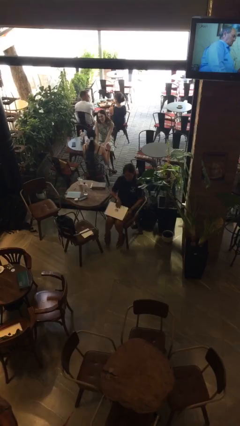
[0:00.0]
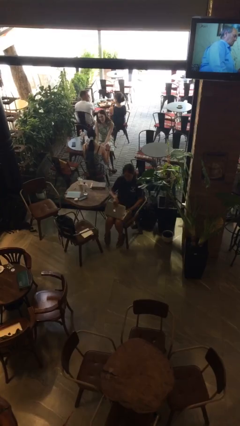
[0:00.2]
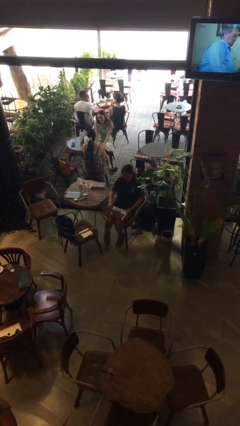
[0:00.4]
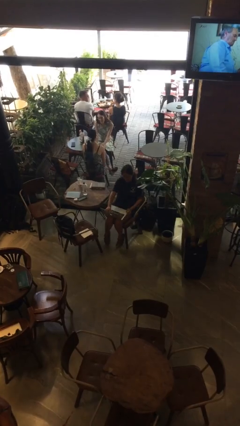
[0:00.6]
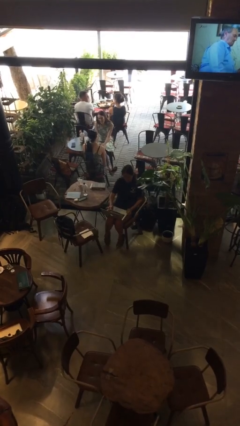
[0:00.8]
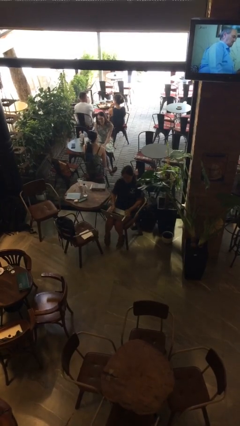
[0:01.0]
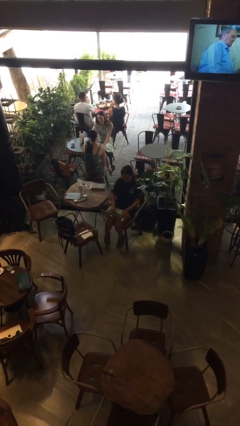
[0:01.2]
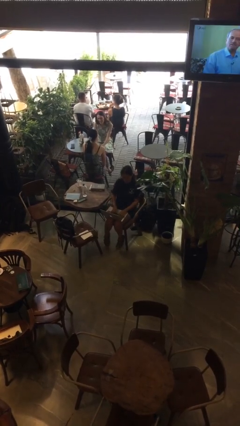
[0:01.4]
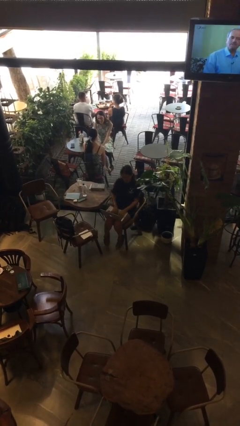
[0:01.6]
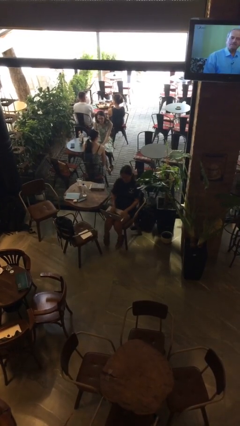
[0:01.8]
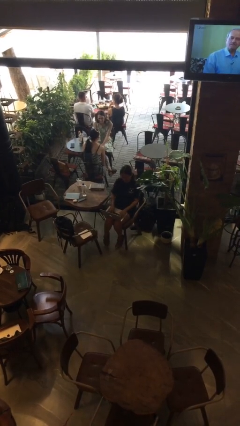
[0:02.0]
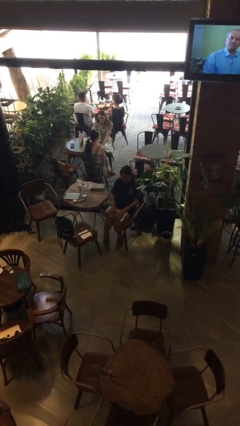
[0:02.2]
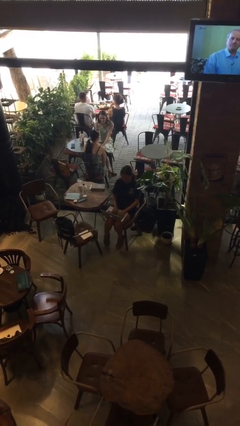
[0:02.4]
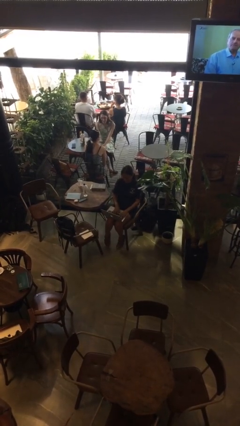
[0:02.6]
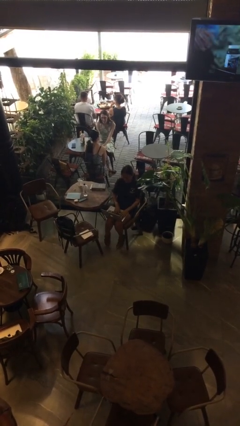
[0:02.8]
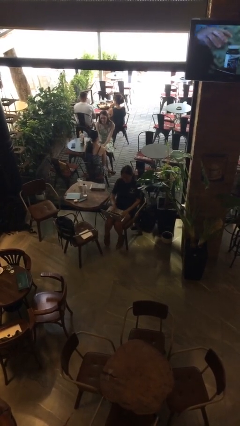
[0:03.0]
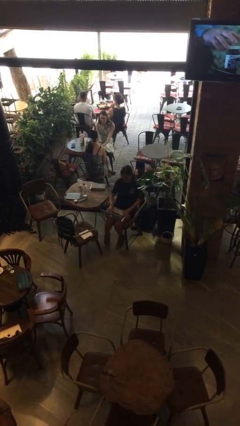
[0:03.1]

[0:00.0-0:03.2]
person opens laptop

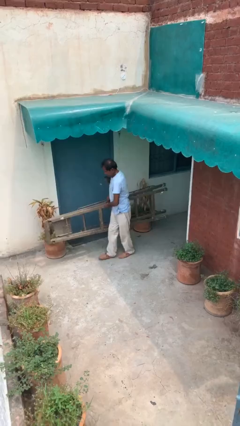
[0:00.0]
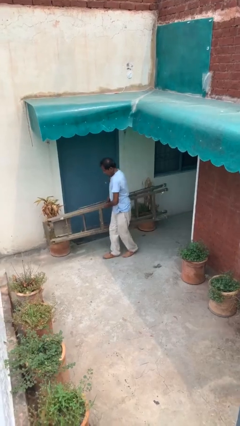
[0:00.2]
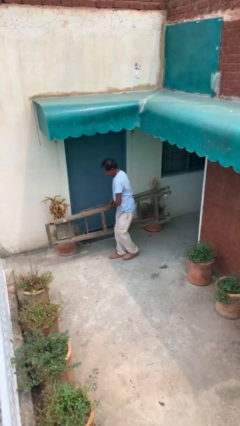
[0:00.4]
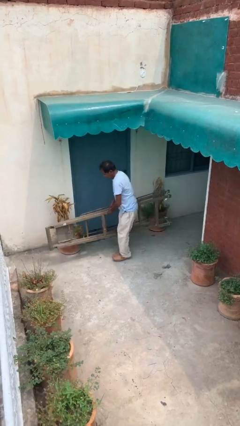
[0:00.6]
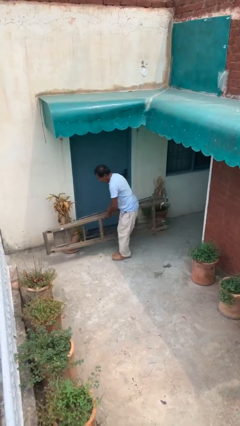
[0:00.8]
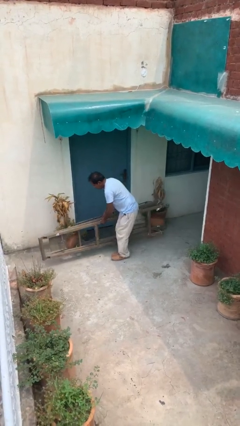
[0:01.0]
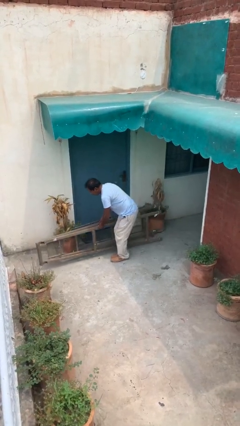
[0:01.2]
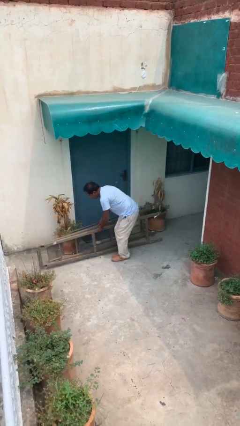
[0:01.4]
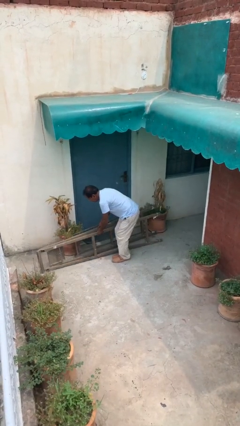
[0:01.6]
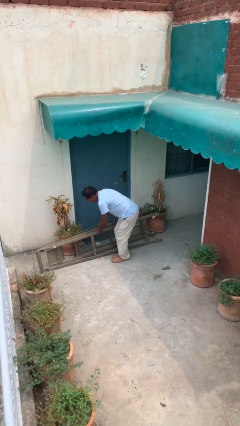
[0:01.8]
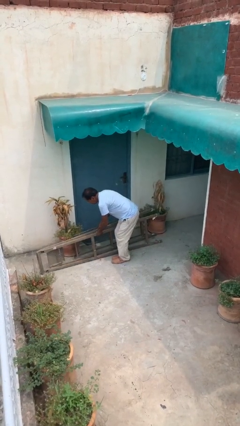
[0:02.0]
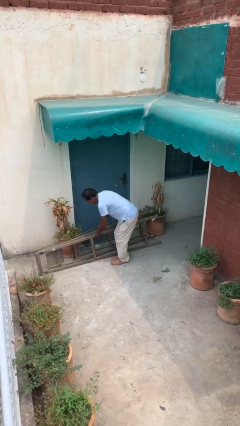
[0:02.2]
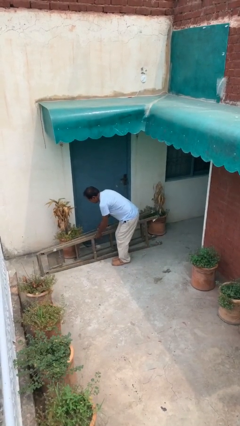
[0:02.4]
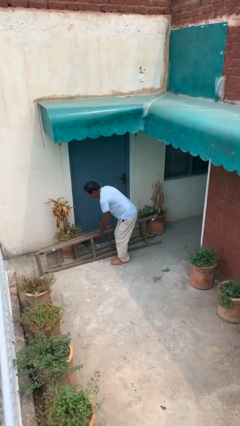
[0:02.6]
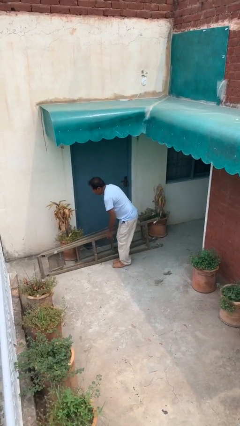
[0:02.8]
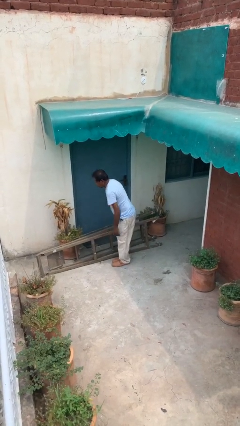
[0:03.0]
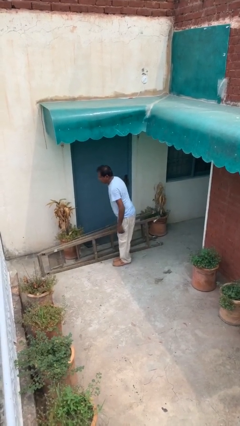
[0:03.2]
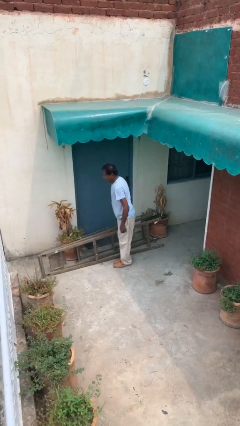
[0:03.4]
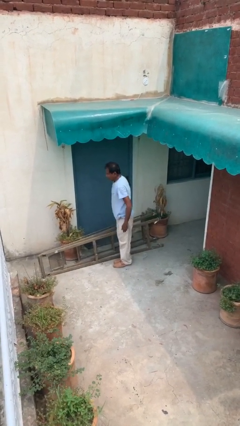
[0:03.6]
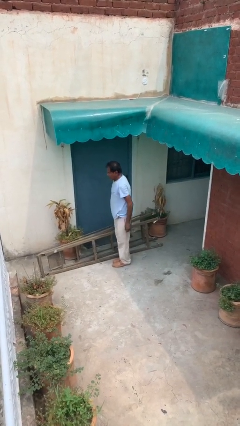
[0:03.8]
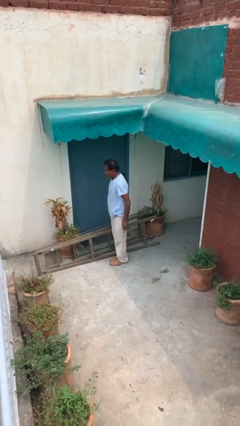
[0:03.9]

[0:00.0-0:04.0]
person puts down object on floor

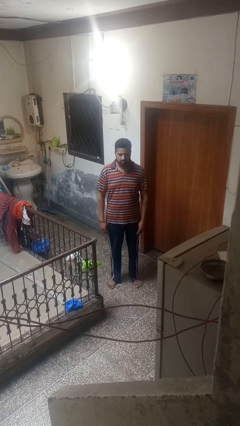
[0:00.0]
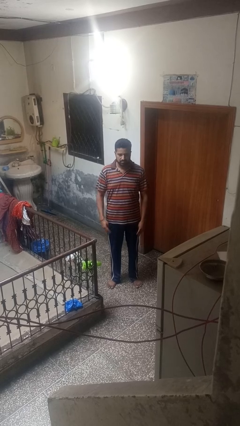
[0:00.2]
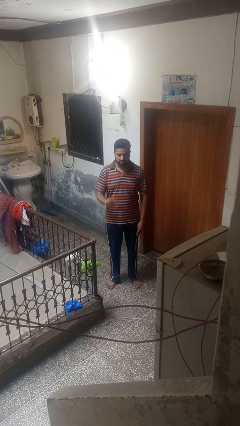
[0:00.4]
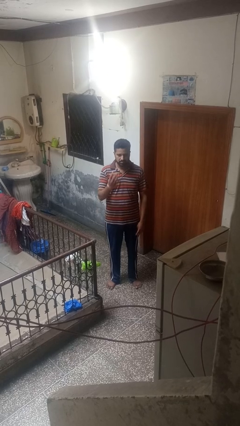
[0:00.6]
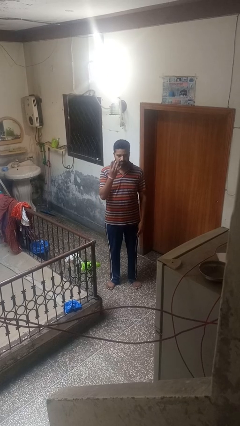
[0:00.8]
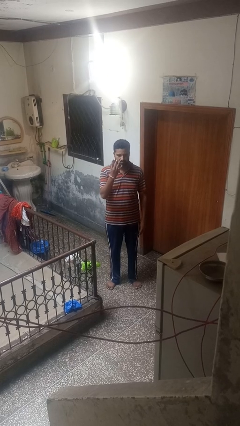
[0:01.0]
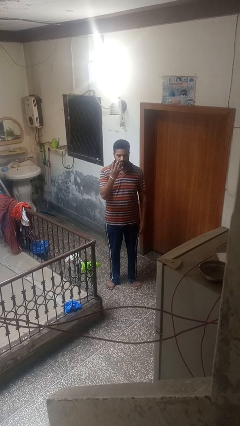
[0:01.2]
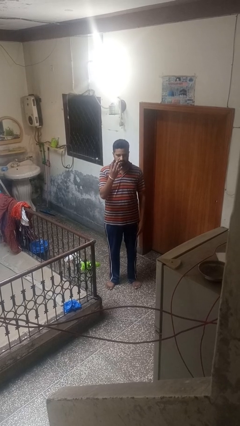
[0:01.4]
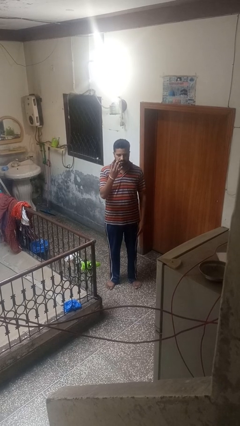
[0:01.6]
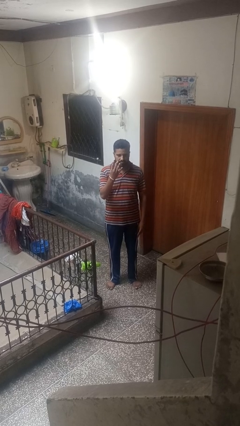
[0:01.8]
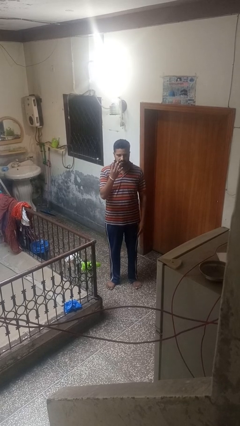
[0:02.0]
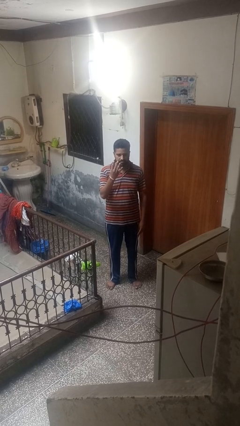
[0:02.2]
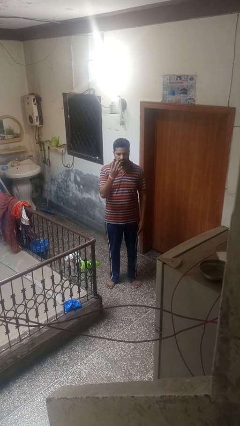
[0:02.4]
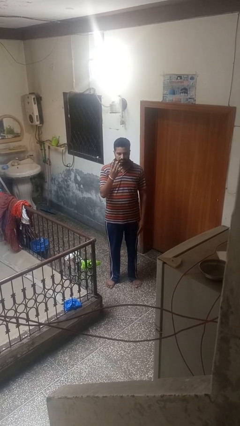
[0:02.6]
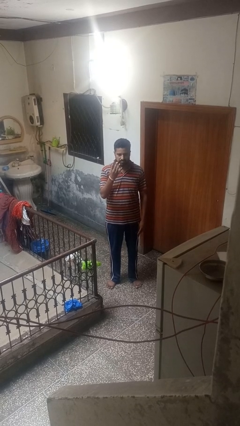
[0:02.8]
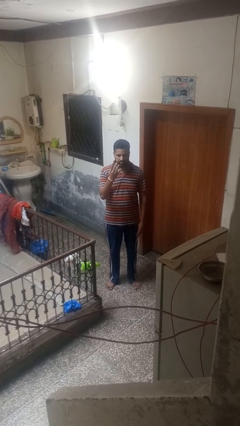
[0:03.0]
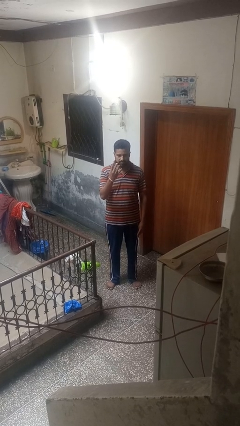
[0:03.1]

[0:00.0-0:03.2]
person gestures number four

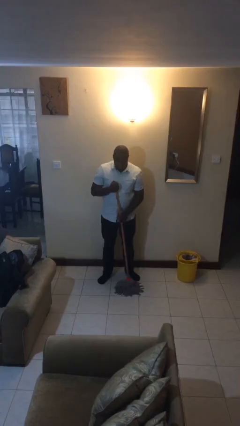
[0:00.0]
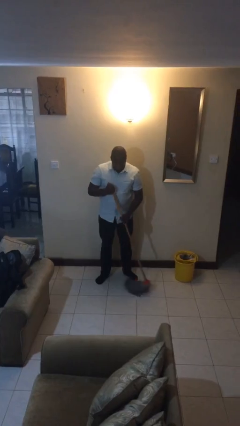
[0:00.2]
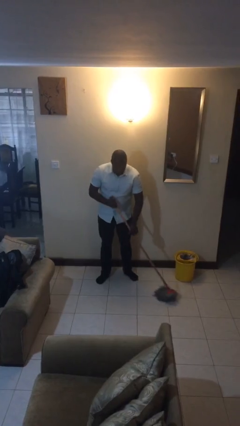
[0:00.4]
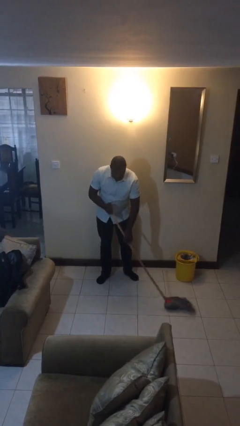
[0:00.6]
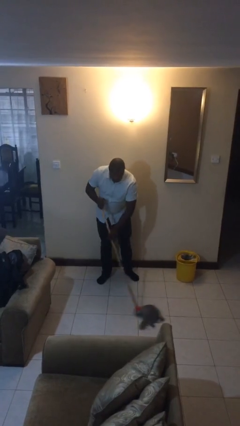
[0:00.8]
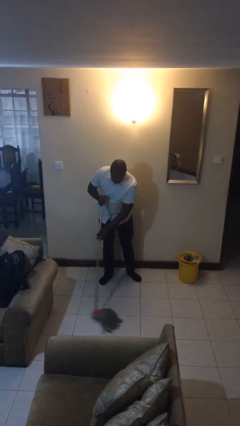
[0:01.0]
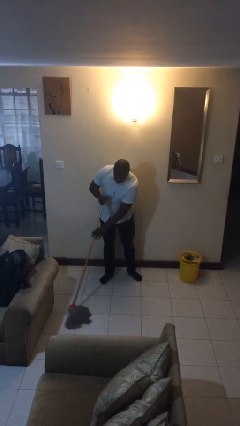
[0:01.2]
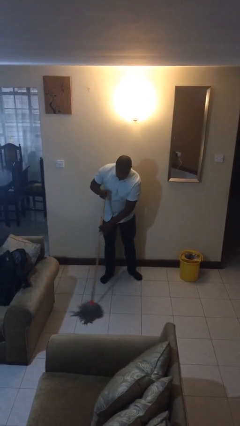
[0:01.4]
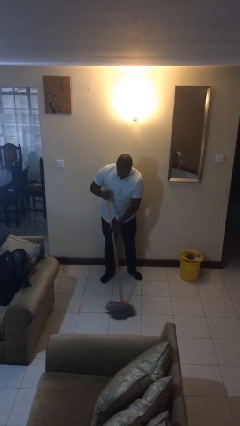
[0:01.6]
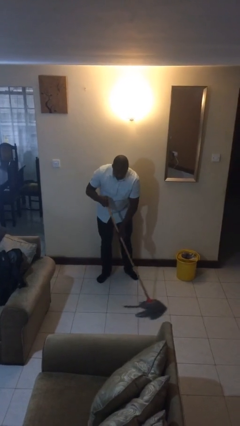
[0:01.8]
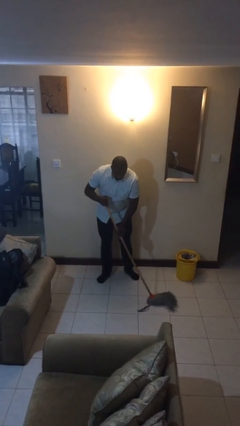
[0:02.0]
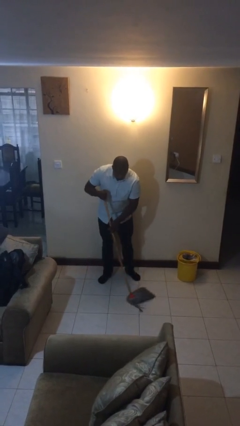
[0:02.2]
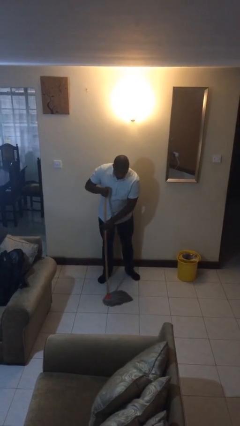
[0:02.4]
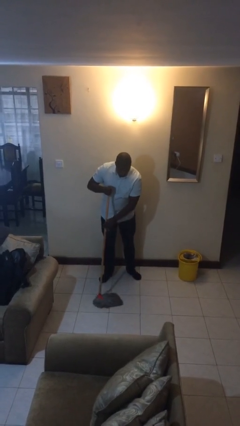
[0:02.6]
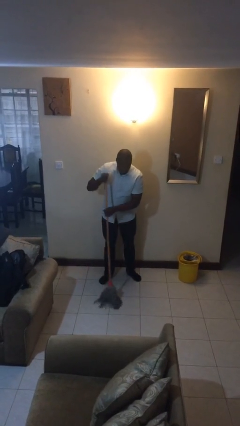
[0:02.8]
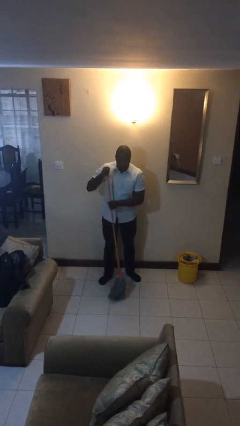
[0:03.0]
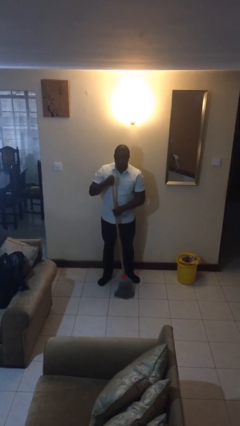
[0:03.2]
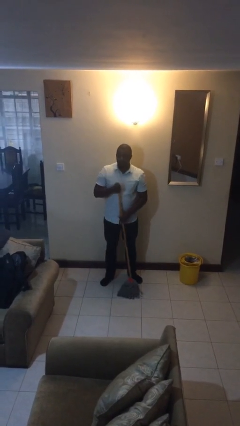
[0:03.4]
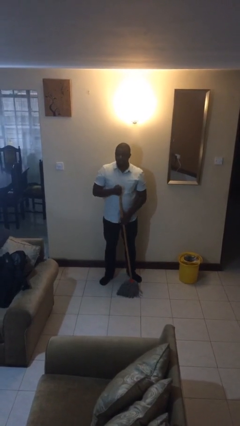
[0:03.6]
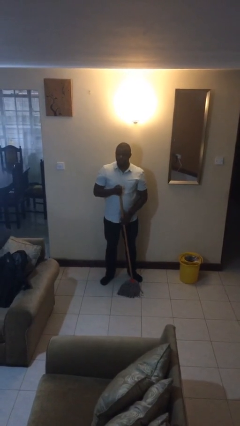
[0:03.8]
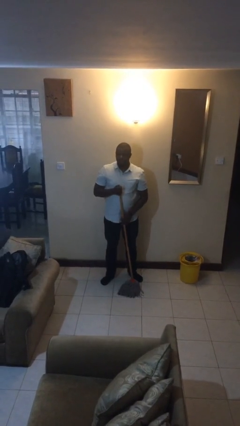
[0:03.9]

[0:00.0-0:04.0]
person mops

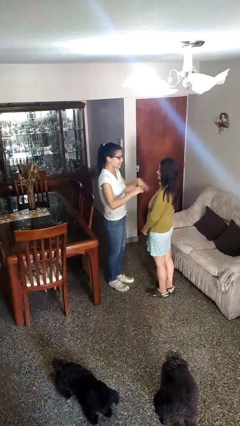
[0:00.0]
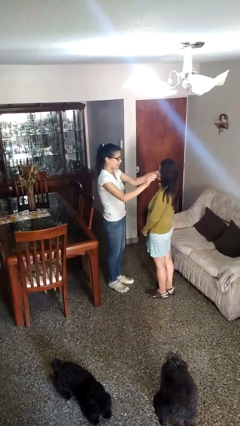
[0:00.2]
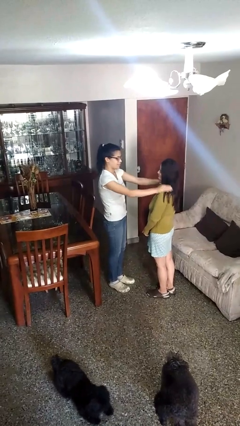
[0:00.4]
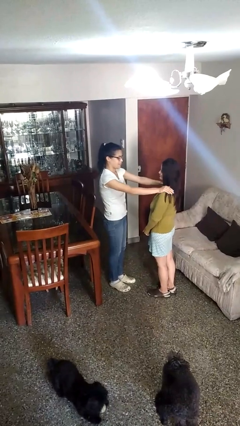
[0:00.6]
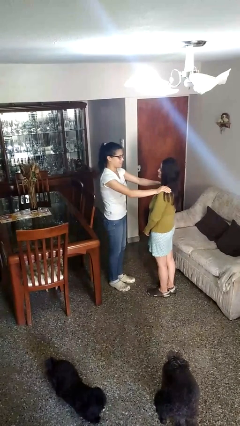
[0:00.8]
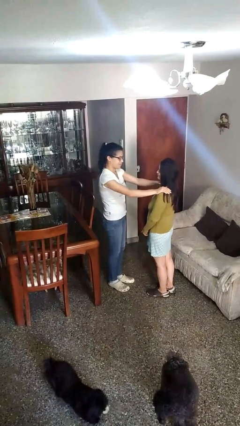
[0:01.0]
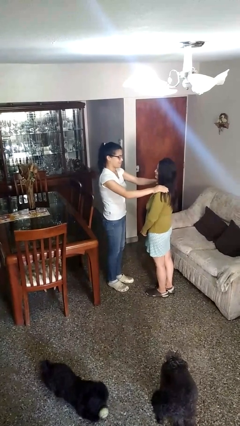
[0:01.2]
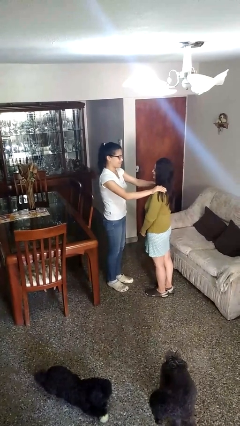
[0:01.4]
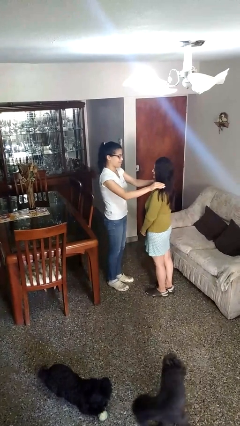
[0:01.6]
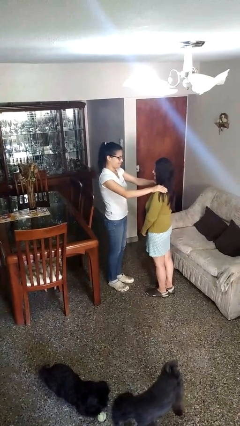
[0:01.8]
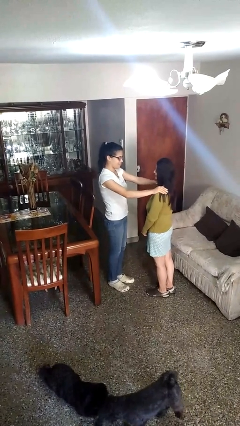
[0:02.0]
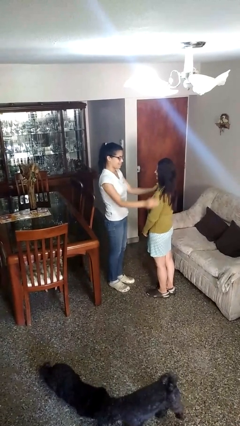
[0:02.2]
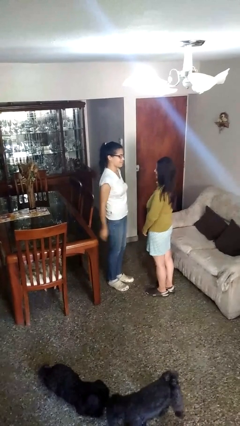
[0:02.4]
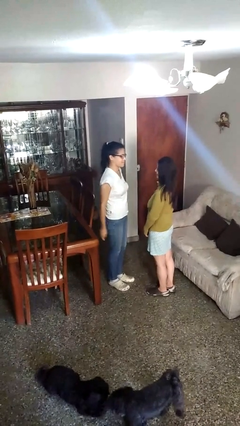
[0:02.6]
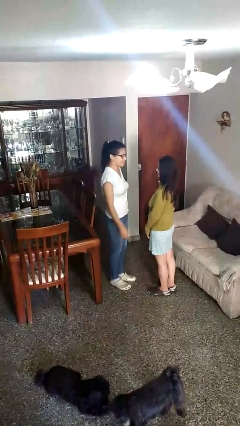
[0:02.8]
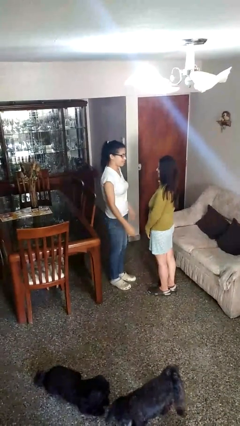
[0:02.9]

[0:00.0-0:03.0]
person pounds shoulders of person

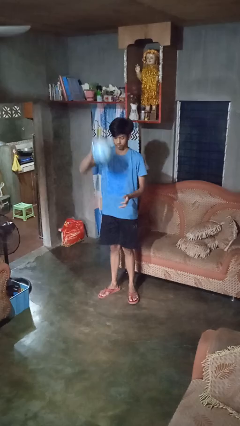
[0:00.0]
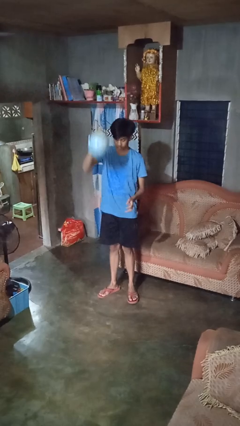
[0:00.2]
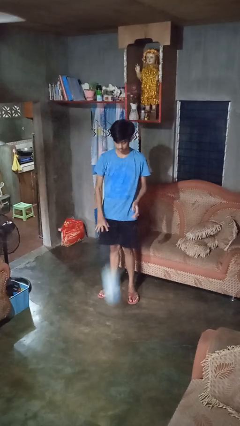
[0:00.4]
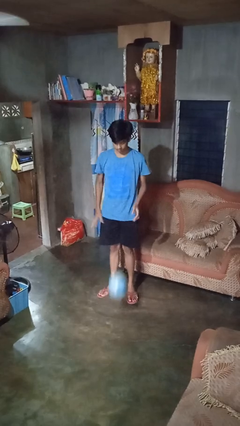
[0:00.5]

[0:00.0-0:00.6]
person bounces ball on floor
